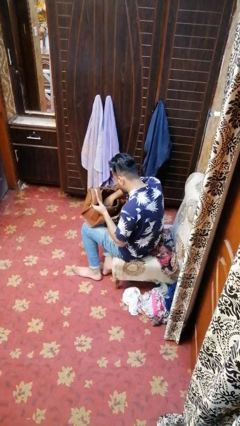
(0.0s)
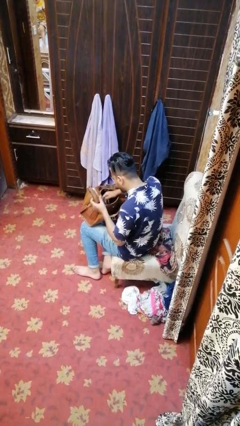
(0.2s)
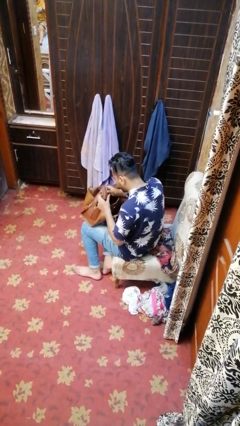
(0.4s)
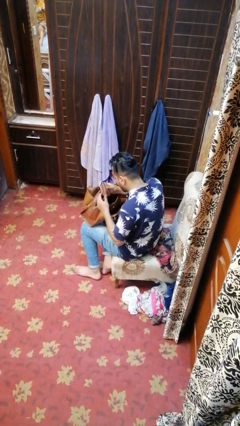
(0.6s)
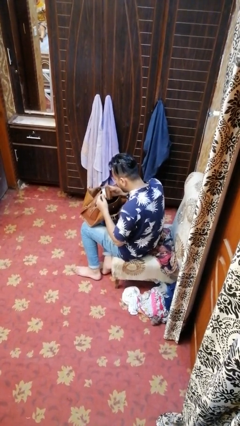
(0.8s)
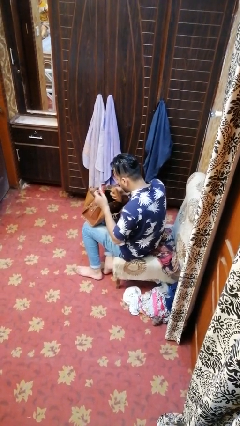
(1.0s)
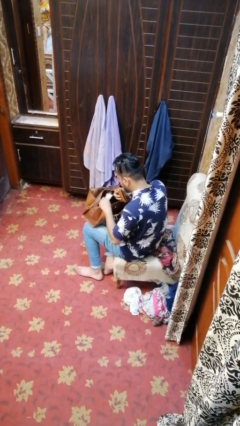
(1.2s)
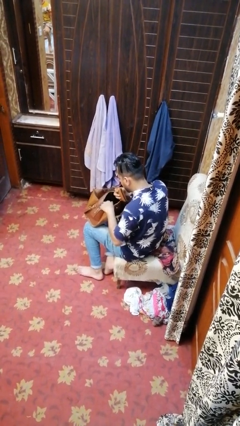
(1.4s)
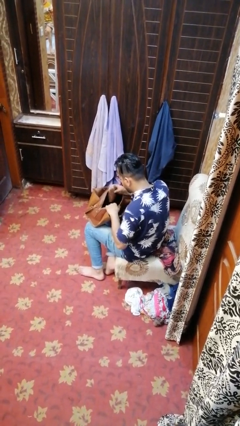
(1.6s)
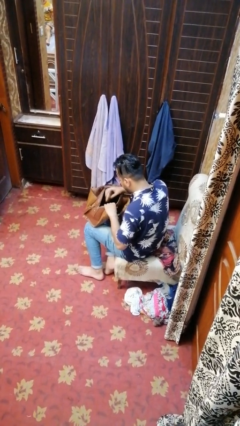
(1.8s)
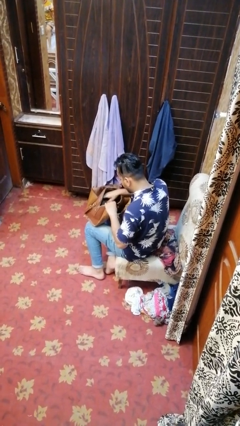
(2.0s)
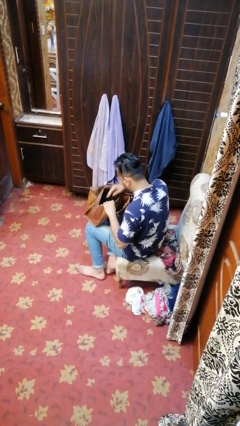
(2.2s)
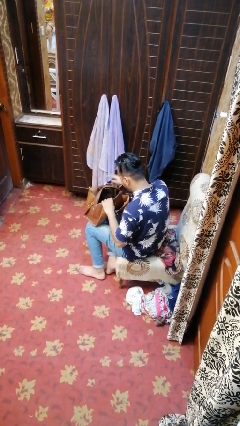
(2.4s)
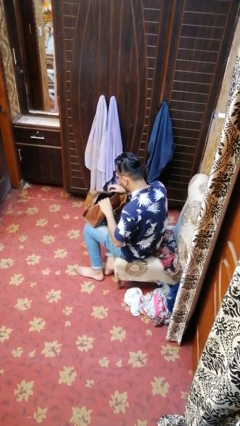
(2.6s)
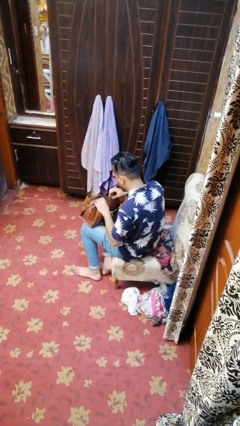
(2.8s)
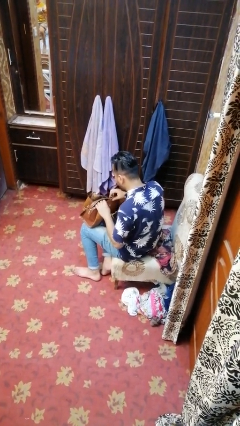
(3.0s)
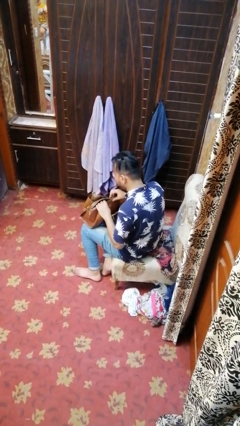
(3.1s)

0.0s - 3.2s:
person puts object into purse

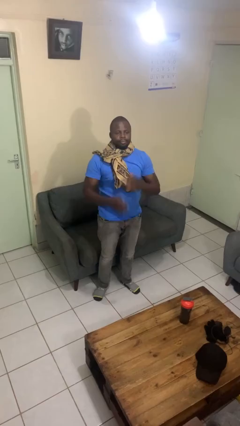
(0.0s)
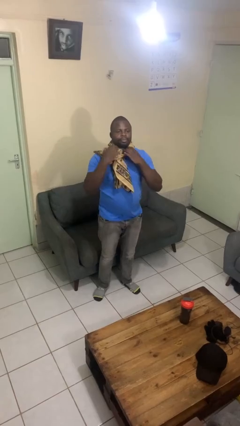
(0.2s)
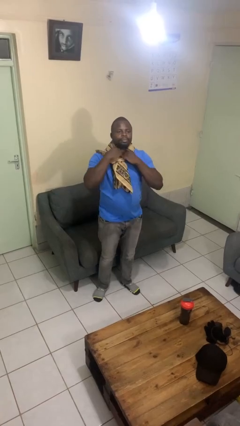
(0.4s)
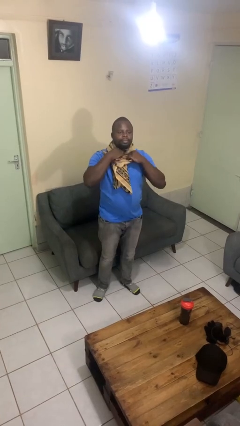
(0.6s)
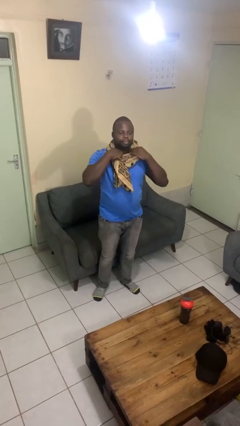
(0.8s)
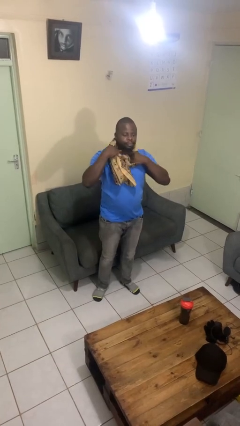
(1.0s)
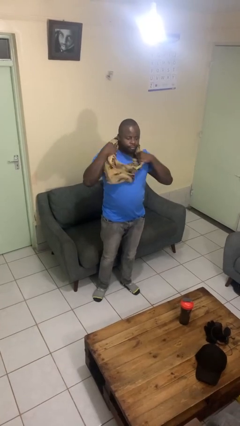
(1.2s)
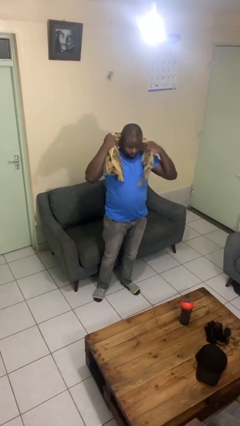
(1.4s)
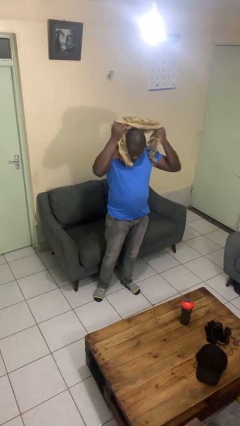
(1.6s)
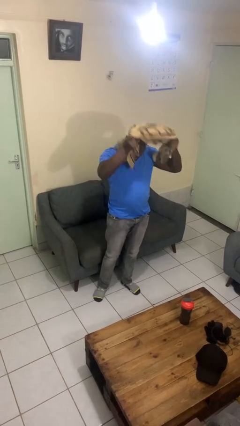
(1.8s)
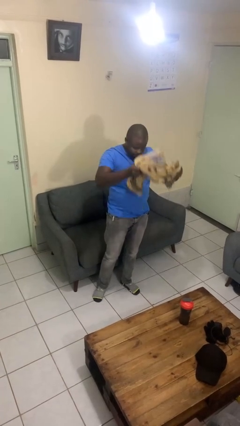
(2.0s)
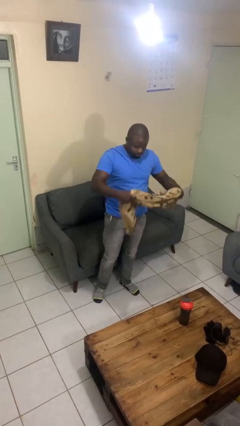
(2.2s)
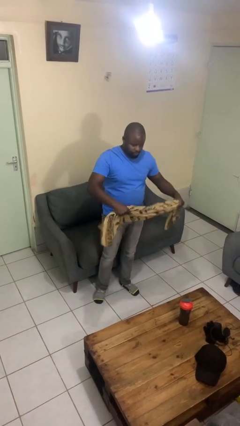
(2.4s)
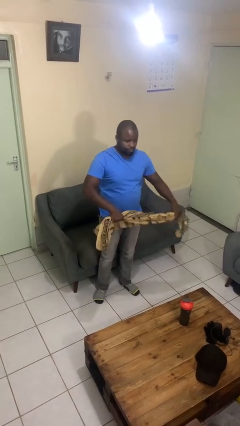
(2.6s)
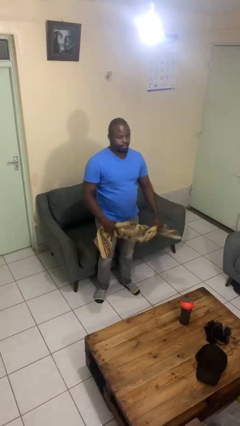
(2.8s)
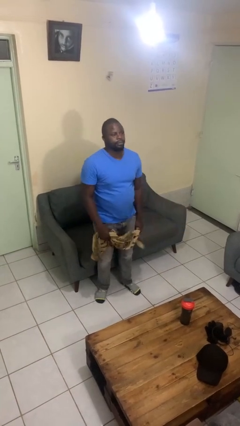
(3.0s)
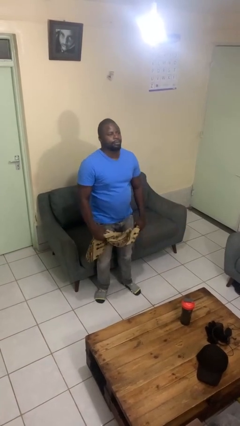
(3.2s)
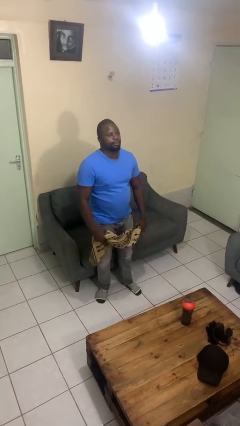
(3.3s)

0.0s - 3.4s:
person takes off scarf

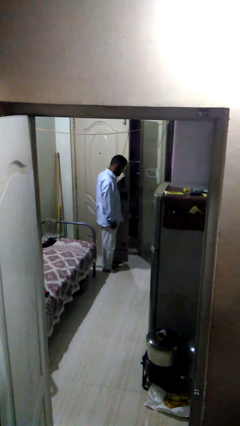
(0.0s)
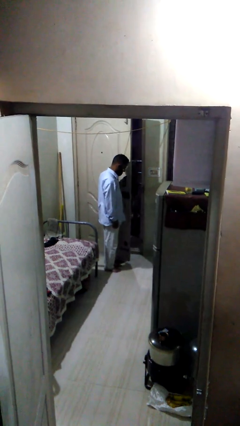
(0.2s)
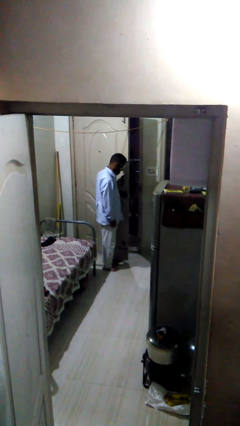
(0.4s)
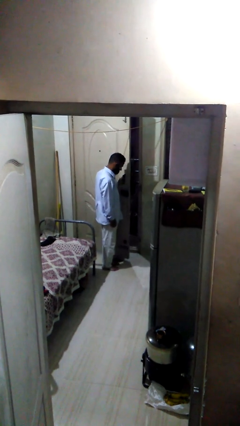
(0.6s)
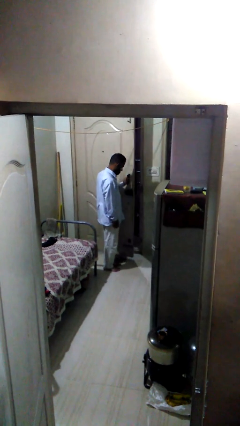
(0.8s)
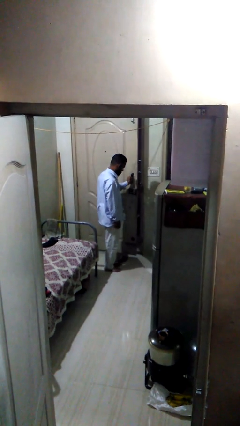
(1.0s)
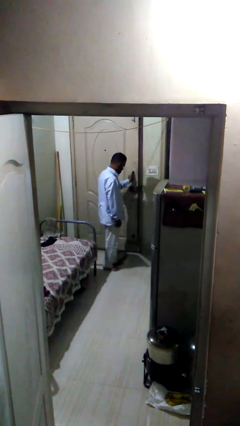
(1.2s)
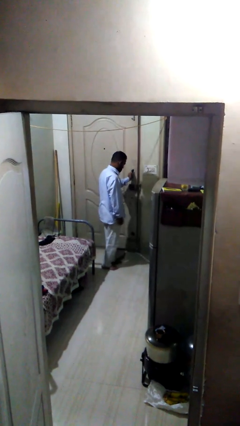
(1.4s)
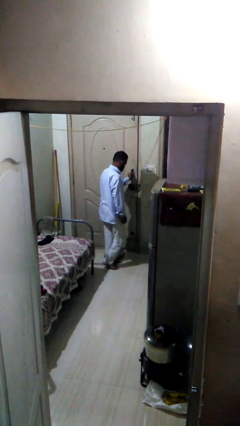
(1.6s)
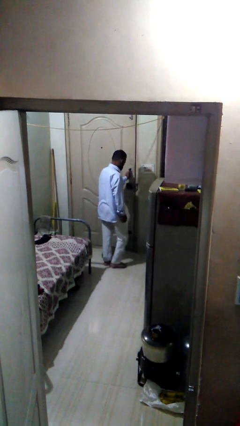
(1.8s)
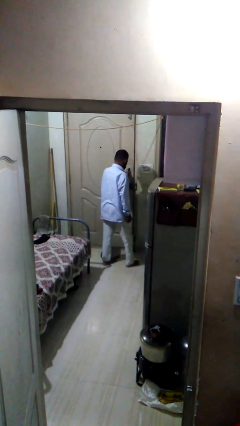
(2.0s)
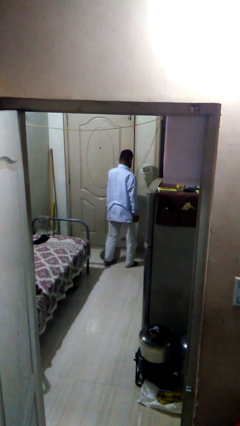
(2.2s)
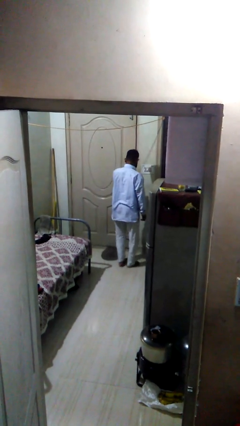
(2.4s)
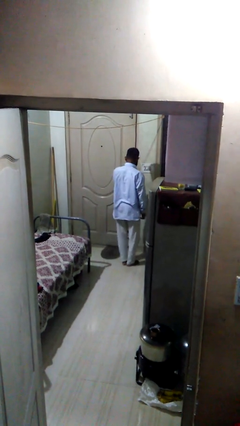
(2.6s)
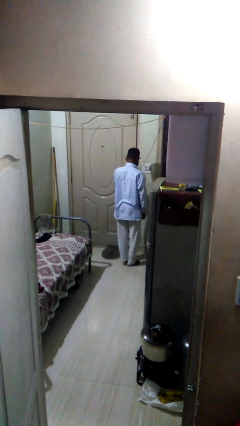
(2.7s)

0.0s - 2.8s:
person closes facility door

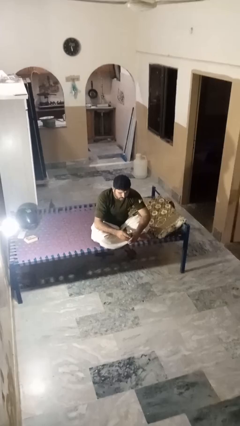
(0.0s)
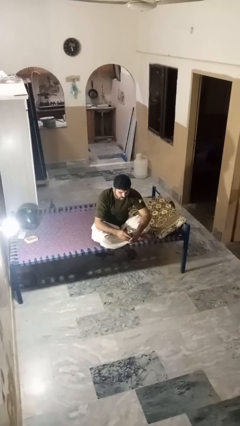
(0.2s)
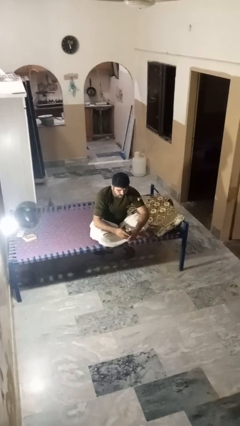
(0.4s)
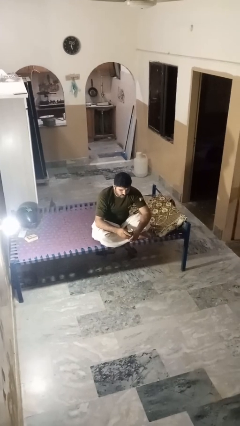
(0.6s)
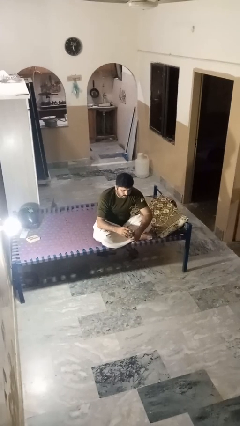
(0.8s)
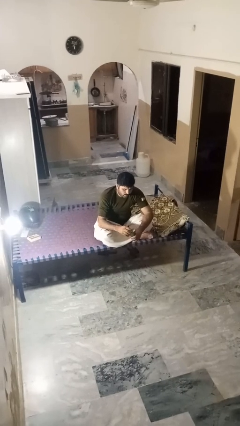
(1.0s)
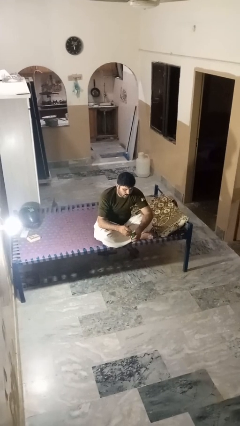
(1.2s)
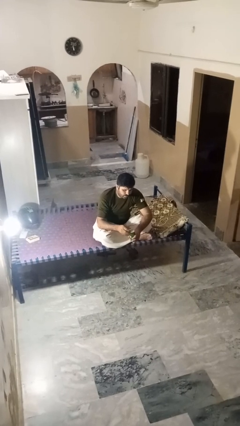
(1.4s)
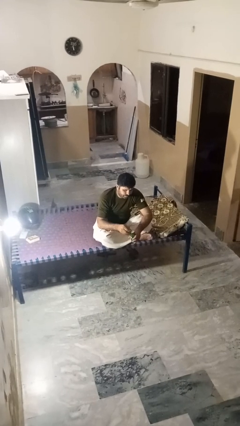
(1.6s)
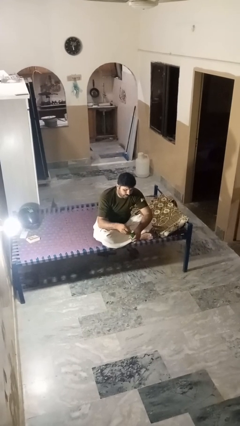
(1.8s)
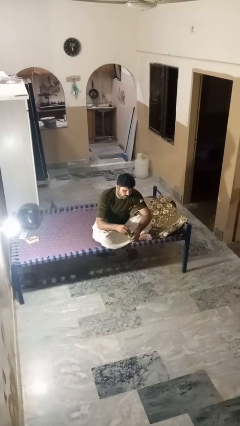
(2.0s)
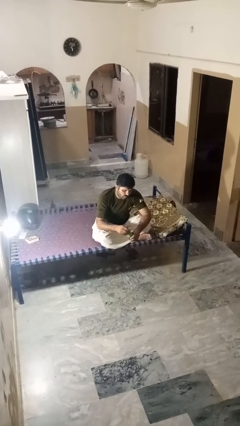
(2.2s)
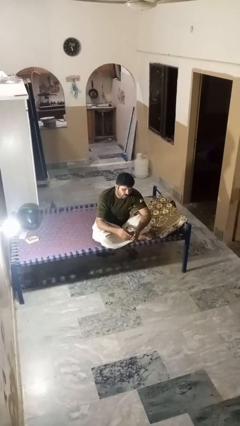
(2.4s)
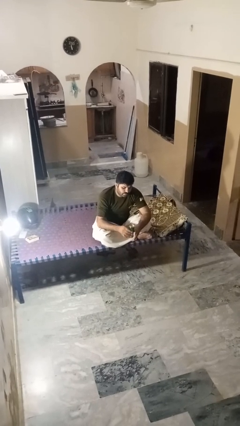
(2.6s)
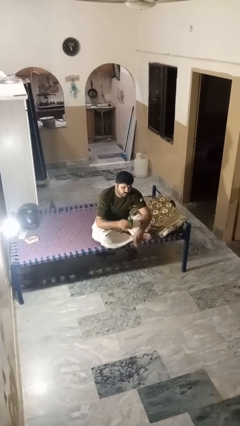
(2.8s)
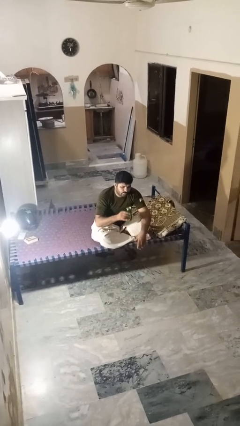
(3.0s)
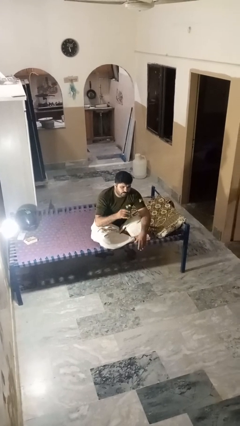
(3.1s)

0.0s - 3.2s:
person opens beverage can

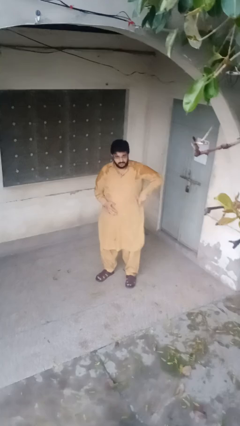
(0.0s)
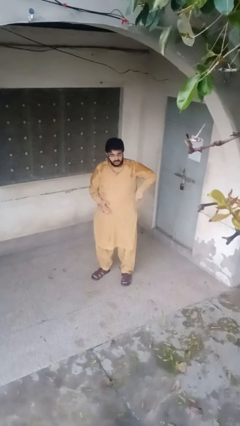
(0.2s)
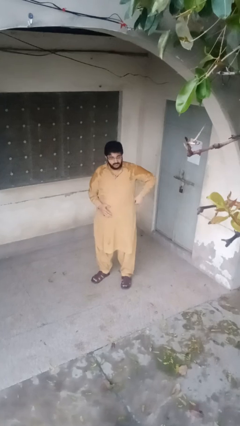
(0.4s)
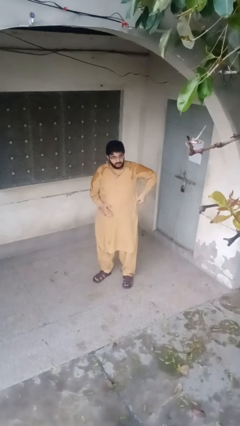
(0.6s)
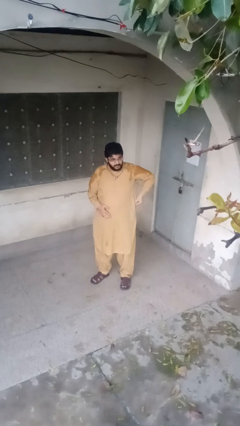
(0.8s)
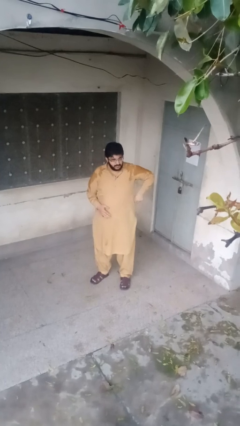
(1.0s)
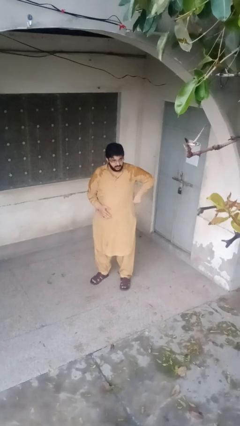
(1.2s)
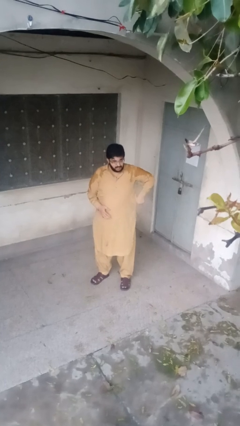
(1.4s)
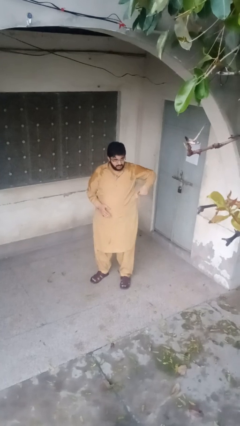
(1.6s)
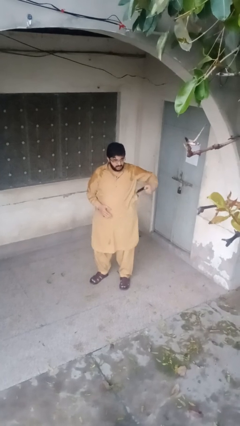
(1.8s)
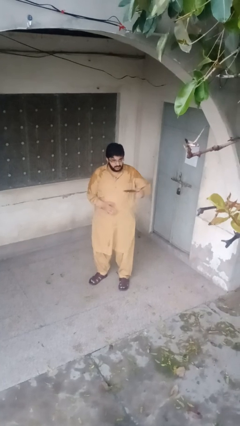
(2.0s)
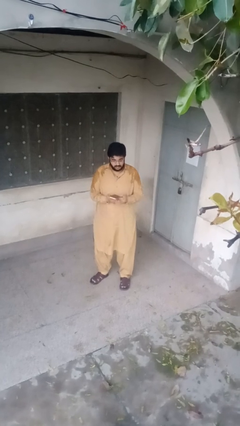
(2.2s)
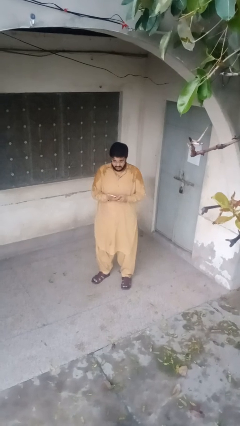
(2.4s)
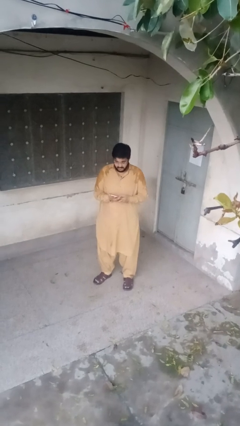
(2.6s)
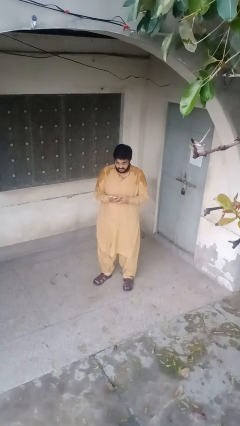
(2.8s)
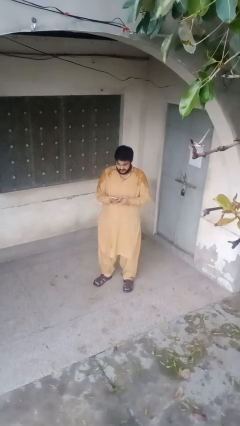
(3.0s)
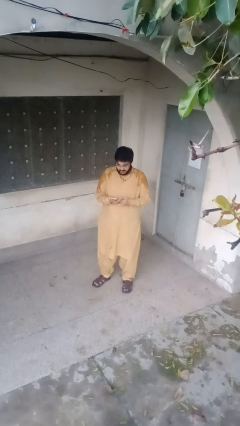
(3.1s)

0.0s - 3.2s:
person takes phone from pocket

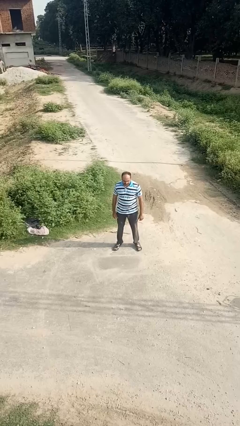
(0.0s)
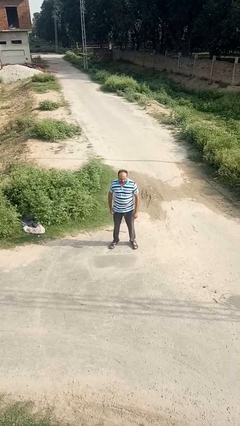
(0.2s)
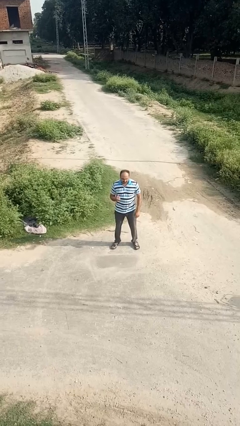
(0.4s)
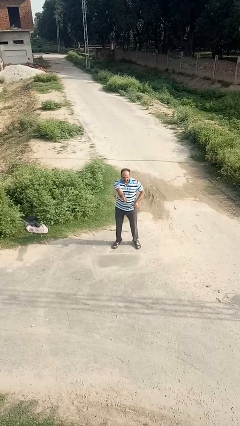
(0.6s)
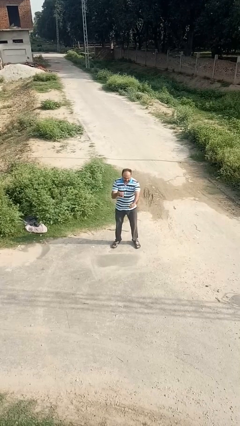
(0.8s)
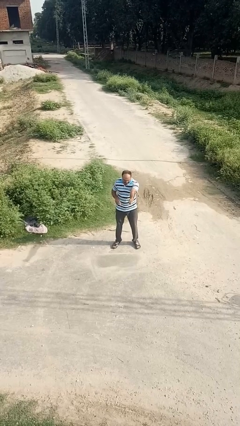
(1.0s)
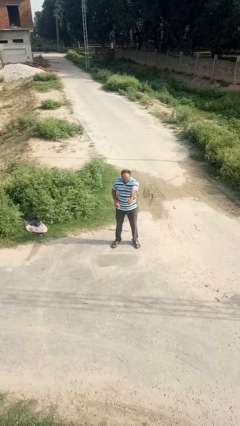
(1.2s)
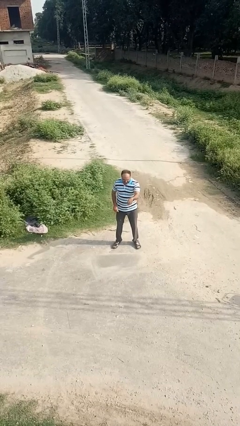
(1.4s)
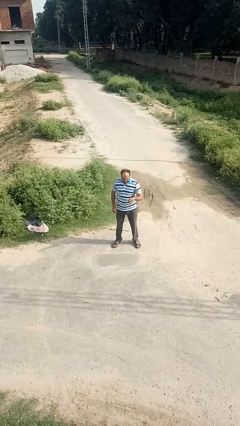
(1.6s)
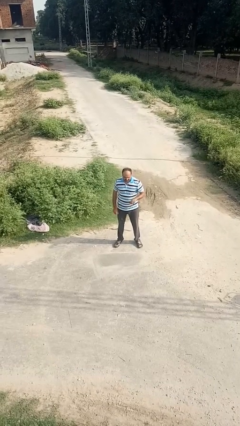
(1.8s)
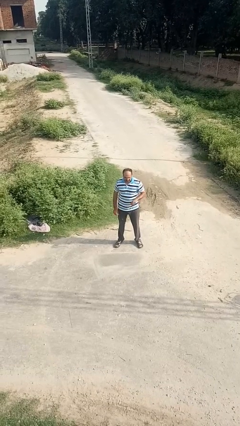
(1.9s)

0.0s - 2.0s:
person punches
